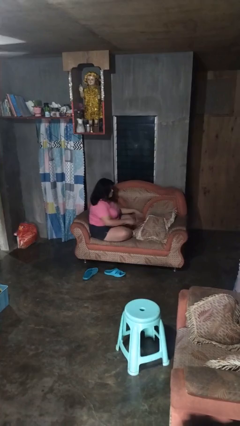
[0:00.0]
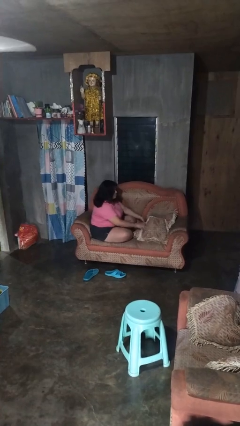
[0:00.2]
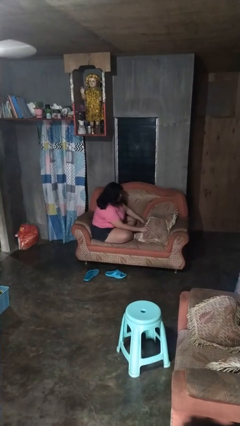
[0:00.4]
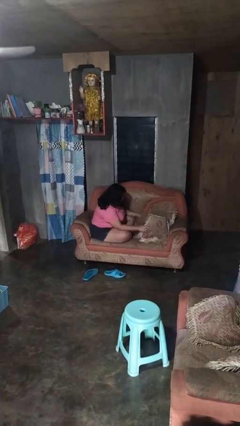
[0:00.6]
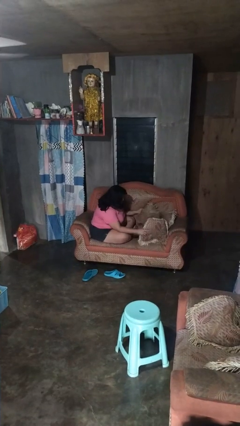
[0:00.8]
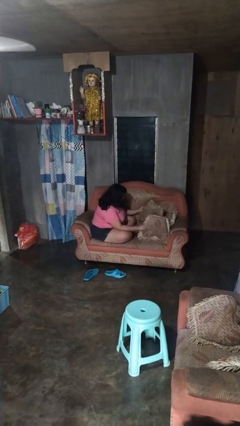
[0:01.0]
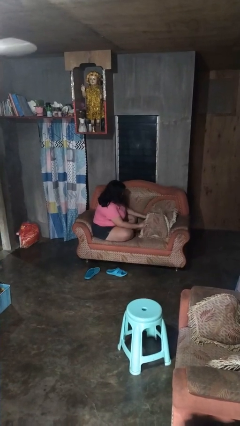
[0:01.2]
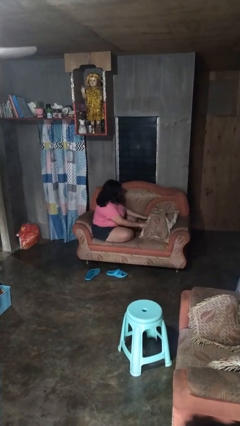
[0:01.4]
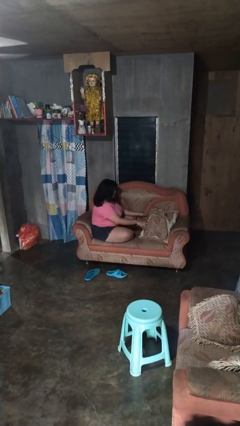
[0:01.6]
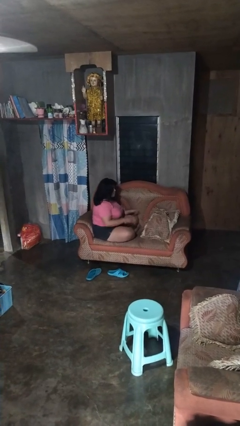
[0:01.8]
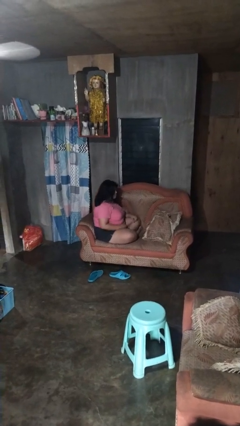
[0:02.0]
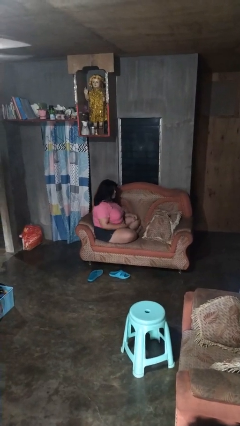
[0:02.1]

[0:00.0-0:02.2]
person searches in couch

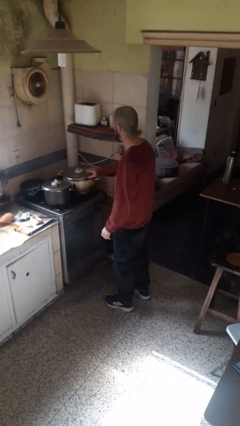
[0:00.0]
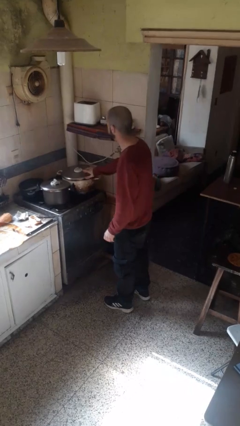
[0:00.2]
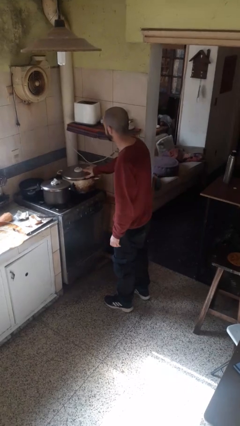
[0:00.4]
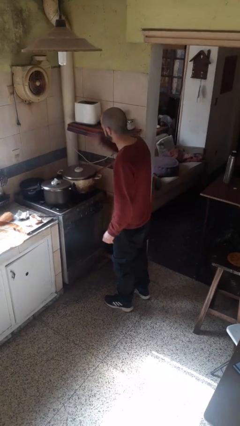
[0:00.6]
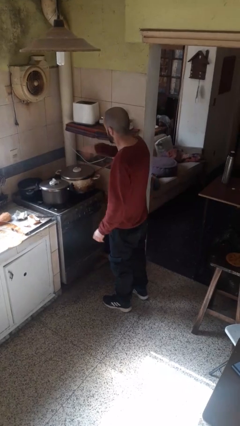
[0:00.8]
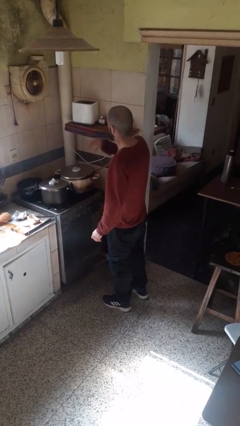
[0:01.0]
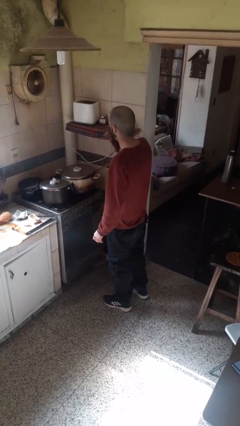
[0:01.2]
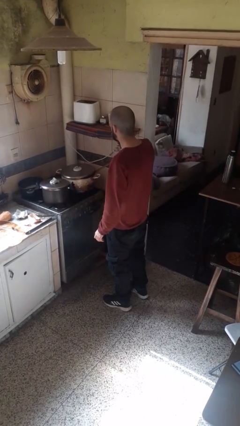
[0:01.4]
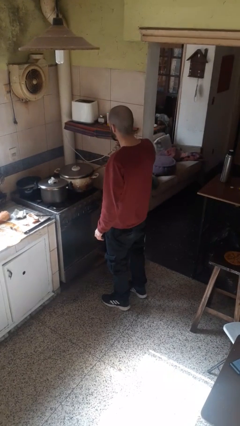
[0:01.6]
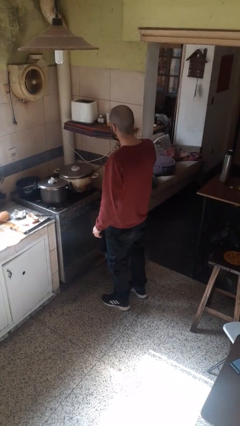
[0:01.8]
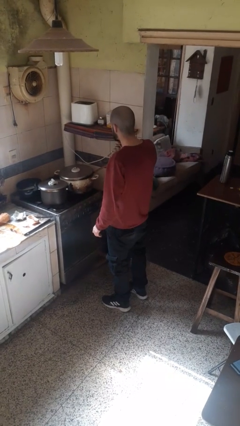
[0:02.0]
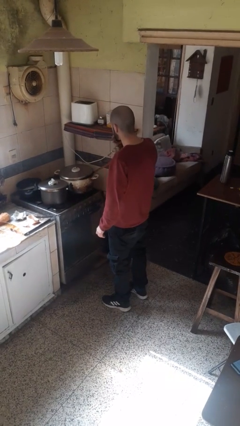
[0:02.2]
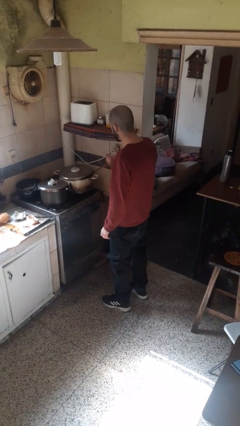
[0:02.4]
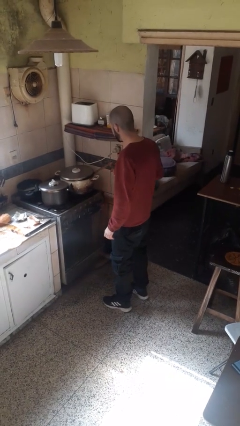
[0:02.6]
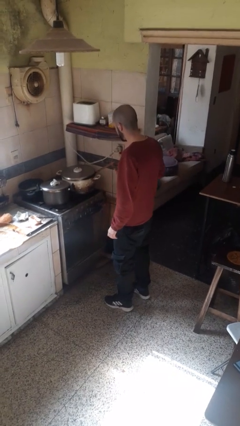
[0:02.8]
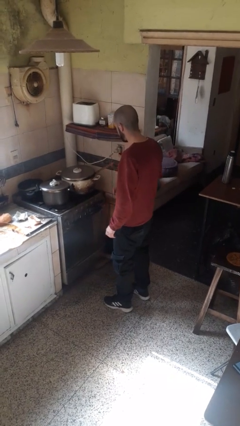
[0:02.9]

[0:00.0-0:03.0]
person burns hand

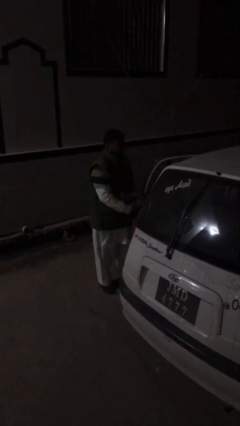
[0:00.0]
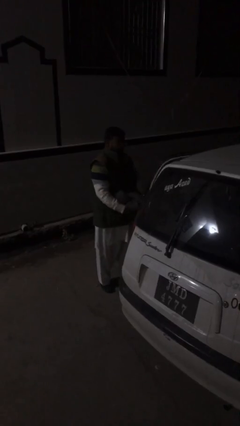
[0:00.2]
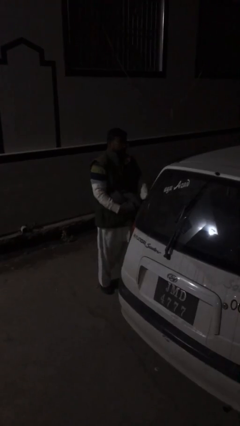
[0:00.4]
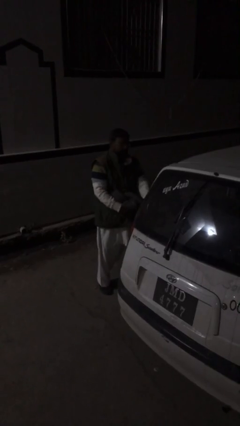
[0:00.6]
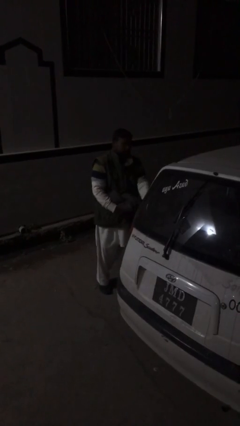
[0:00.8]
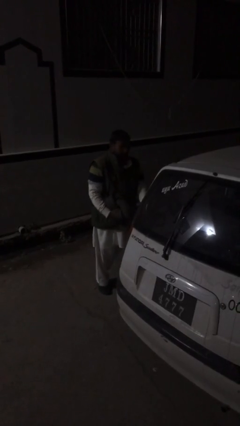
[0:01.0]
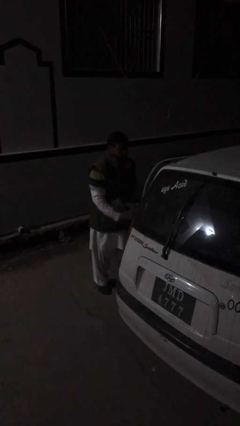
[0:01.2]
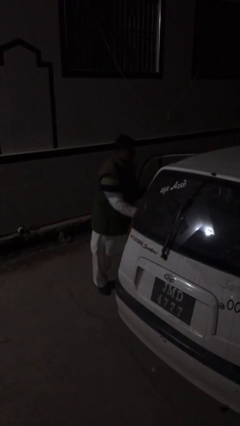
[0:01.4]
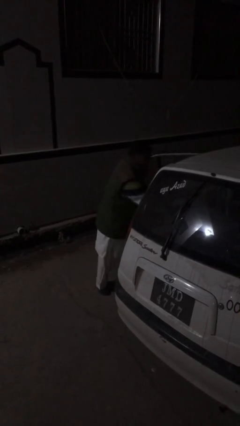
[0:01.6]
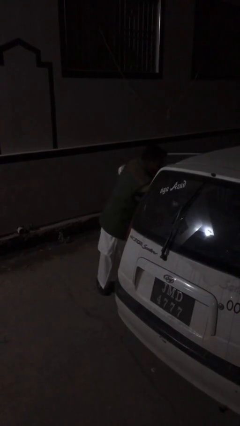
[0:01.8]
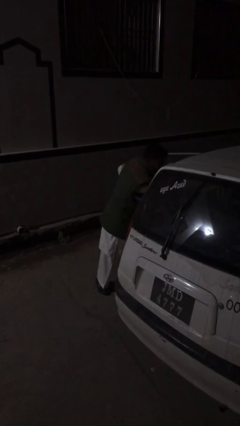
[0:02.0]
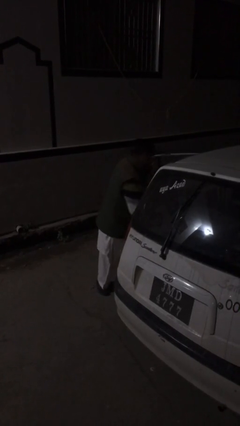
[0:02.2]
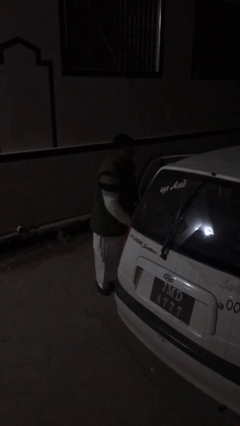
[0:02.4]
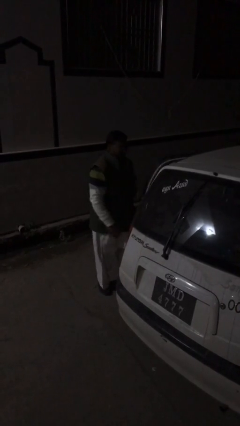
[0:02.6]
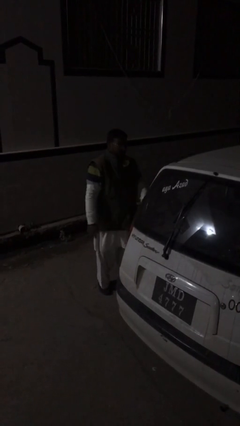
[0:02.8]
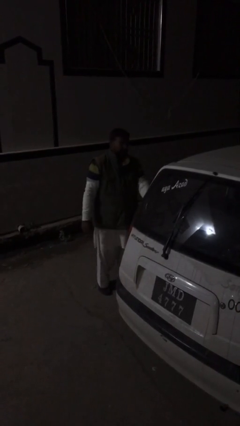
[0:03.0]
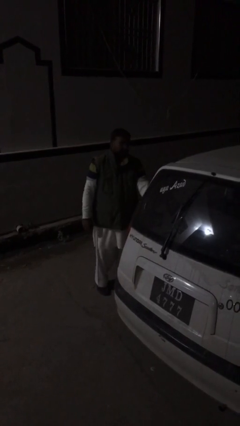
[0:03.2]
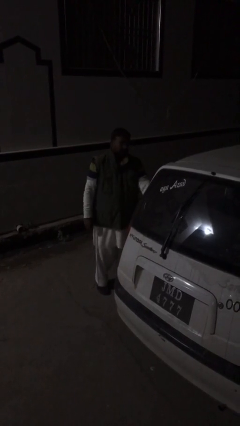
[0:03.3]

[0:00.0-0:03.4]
person loads car

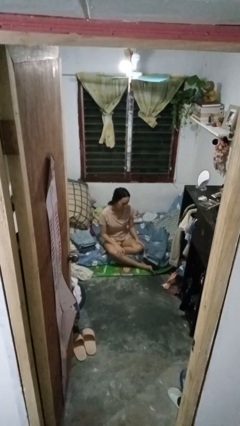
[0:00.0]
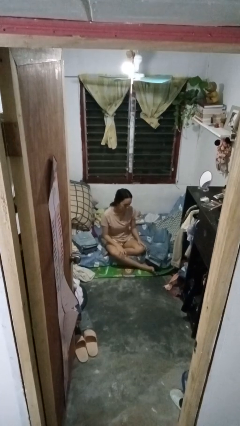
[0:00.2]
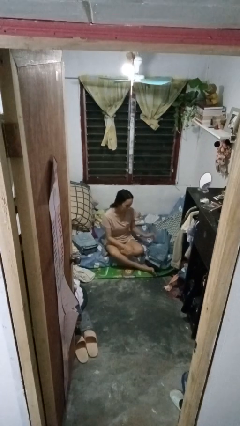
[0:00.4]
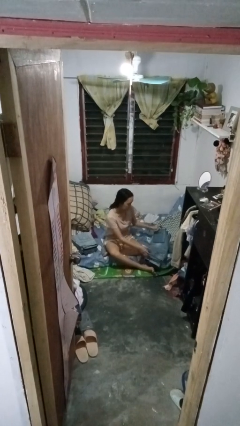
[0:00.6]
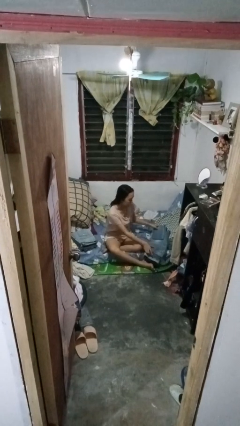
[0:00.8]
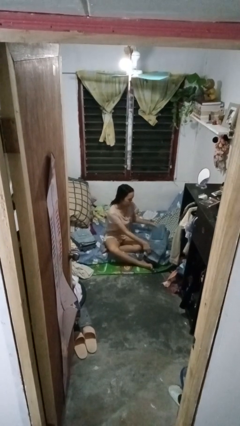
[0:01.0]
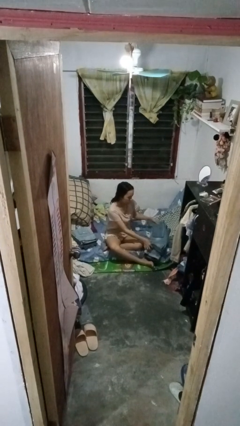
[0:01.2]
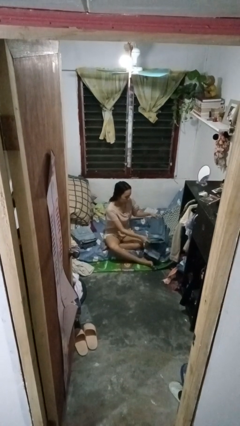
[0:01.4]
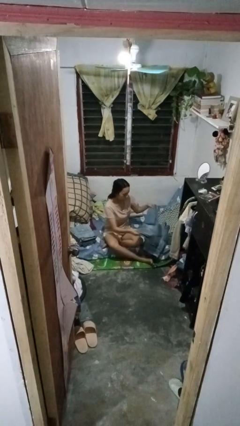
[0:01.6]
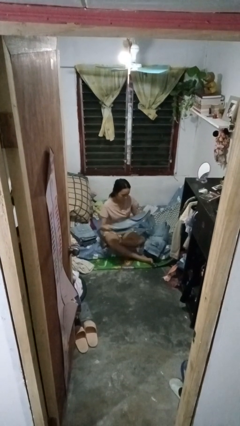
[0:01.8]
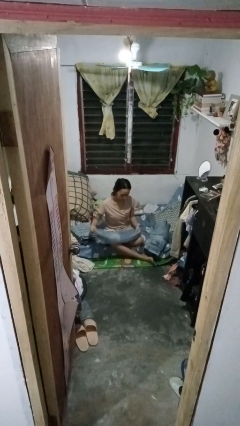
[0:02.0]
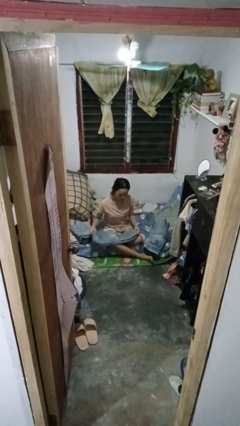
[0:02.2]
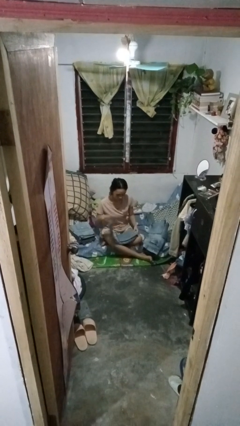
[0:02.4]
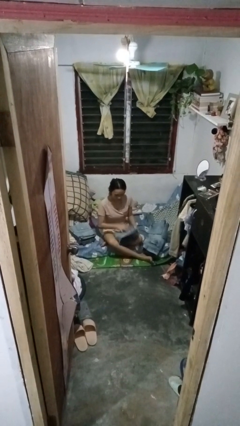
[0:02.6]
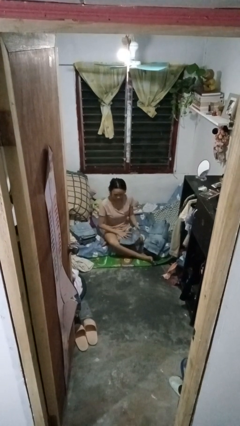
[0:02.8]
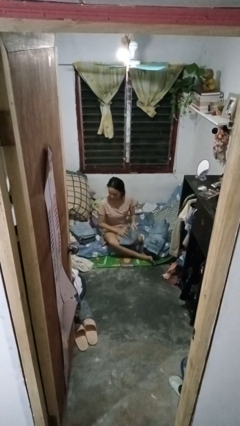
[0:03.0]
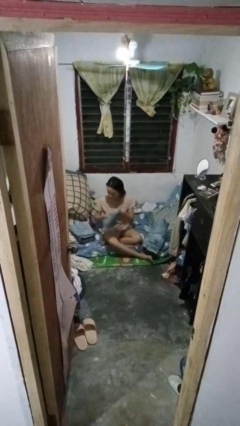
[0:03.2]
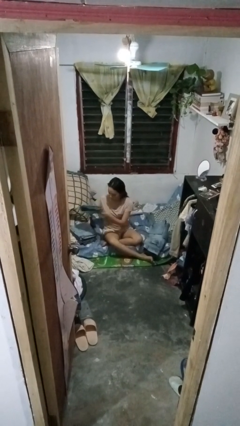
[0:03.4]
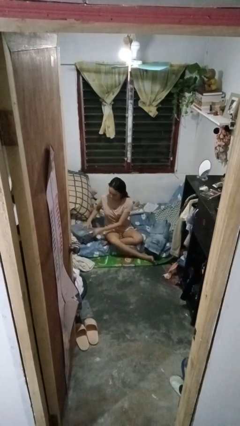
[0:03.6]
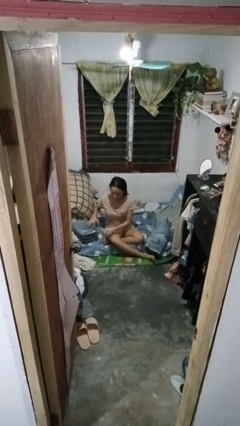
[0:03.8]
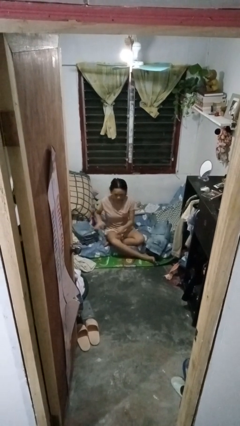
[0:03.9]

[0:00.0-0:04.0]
person folds pants

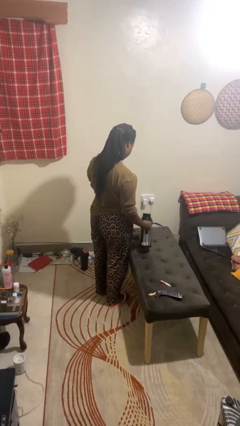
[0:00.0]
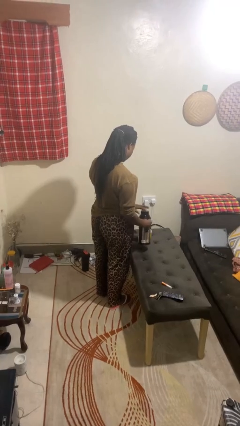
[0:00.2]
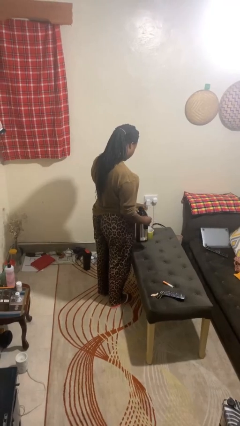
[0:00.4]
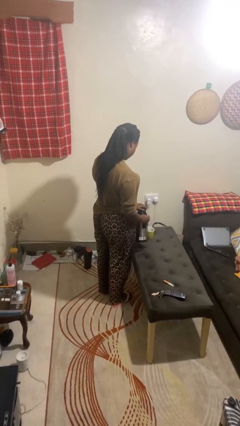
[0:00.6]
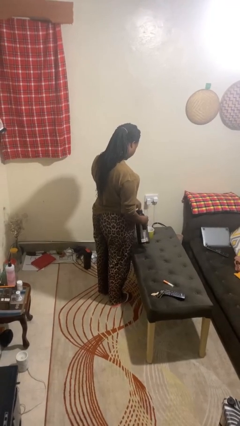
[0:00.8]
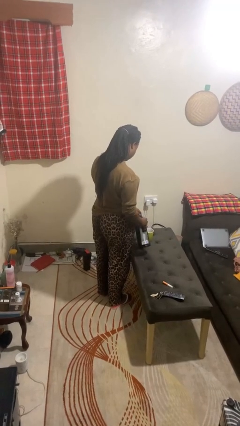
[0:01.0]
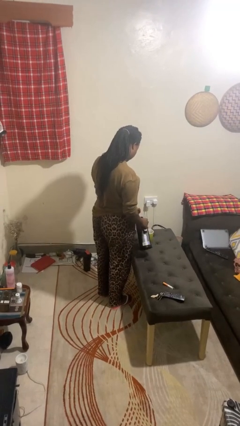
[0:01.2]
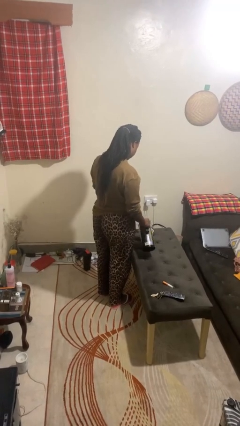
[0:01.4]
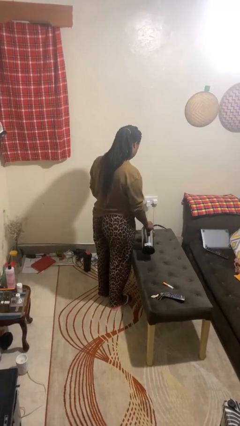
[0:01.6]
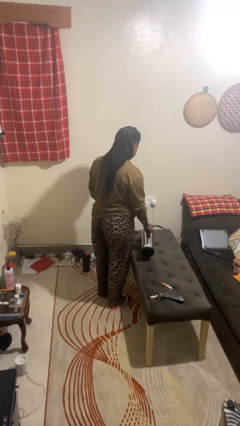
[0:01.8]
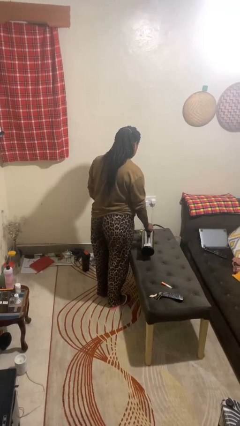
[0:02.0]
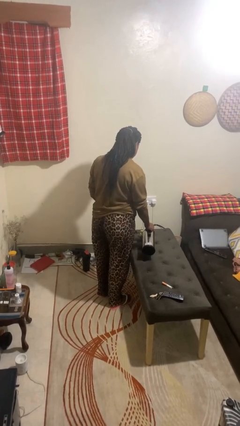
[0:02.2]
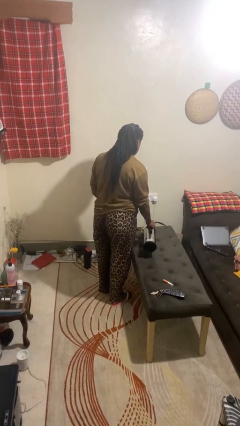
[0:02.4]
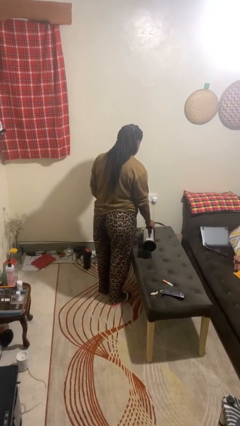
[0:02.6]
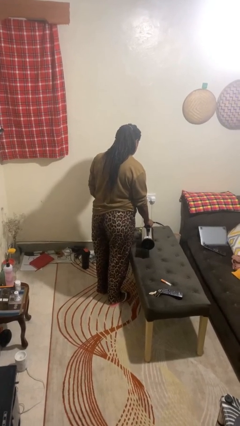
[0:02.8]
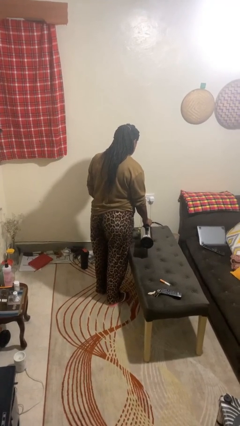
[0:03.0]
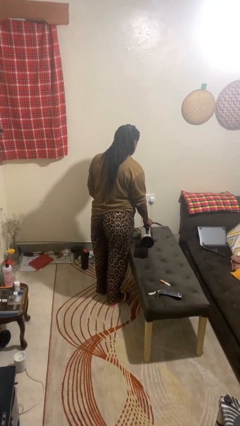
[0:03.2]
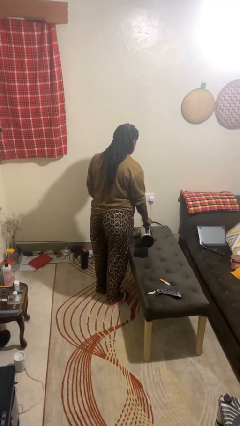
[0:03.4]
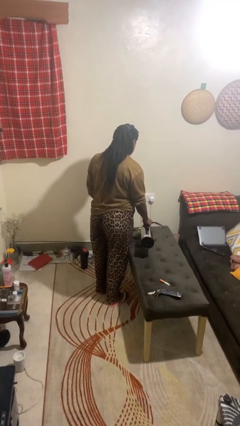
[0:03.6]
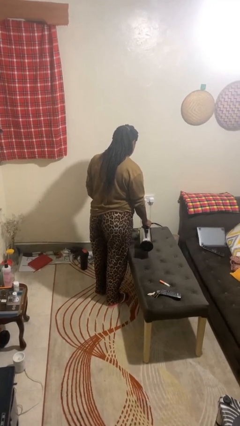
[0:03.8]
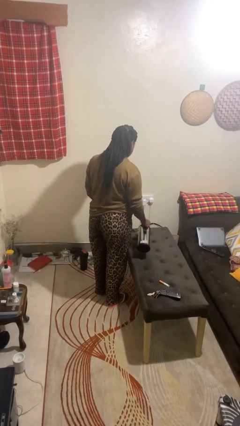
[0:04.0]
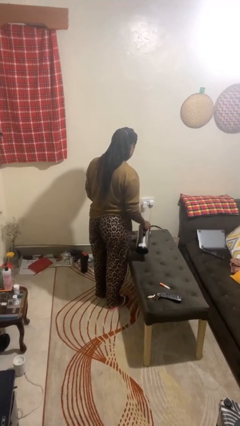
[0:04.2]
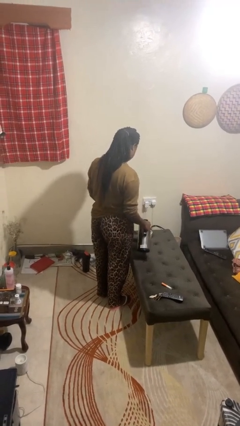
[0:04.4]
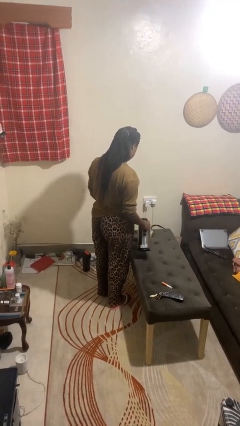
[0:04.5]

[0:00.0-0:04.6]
person pours coffee into mug

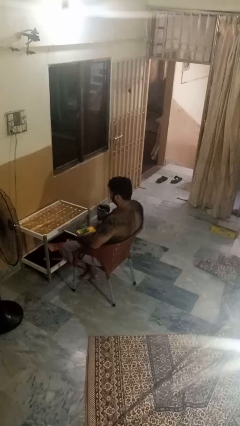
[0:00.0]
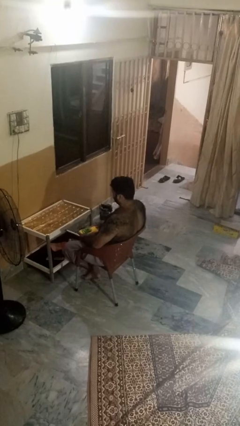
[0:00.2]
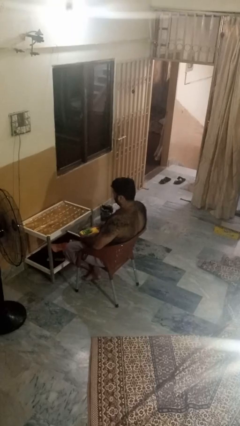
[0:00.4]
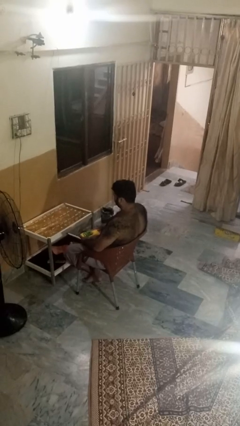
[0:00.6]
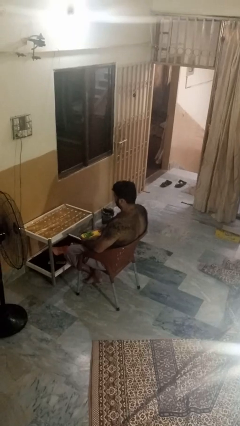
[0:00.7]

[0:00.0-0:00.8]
person throws object on table
